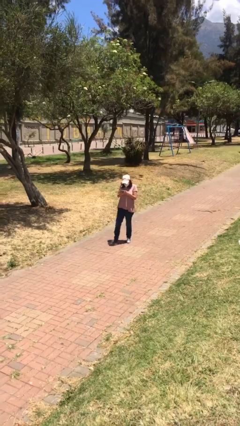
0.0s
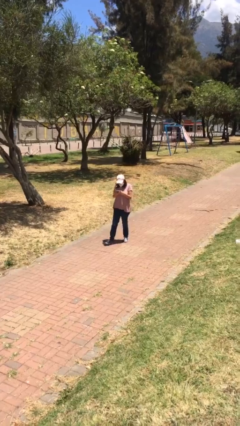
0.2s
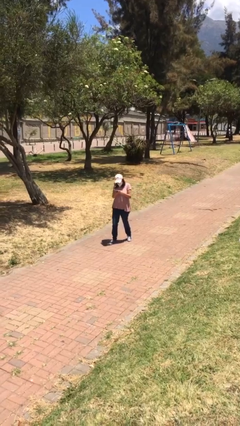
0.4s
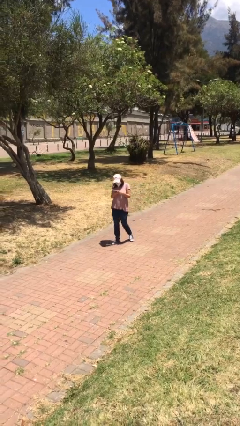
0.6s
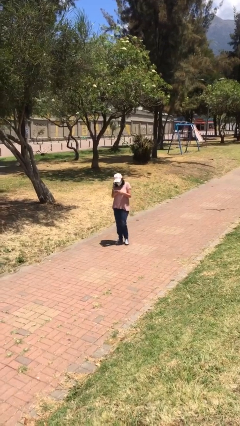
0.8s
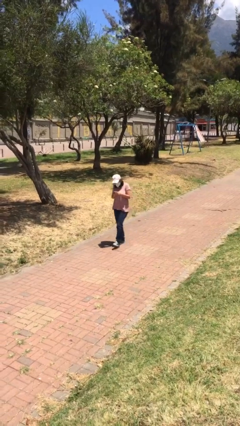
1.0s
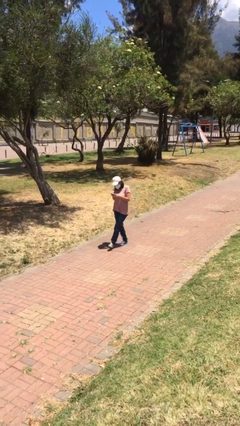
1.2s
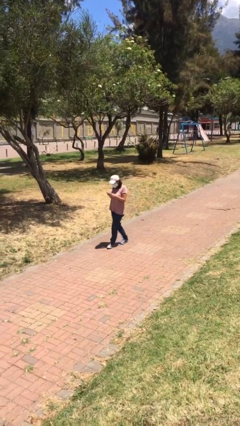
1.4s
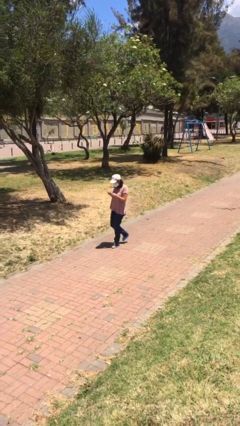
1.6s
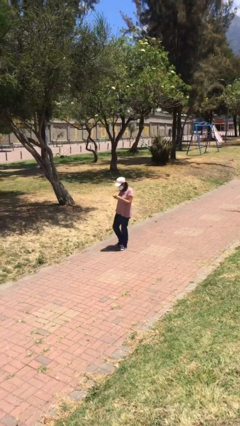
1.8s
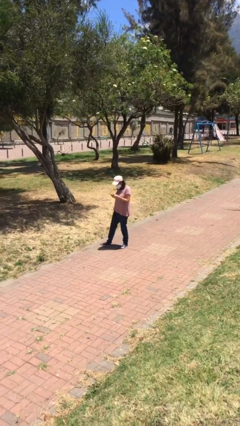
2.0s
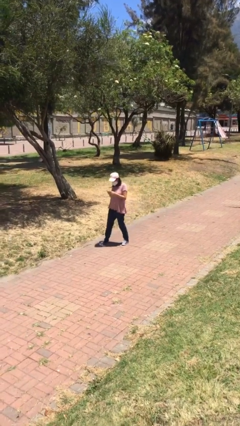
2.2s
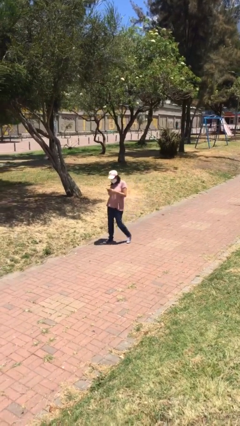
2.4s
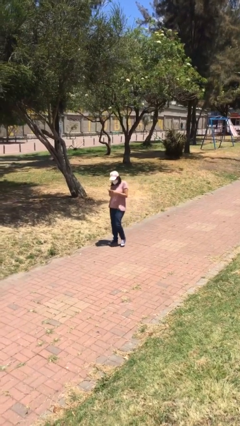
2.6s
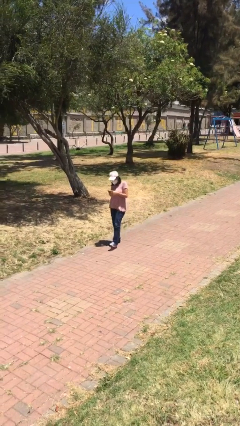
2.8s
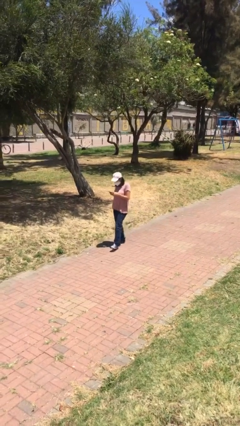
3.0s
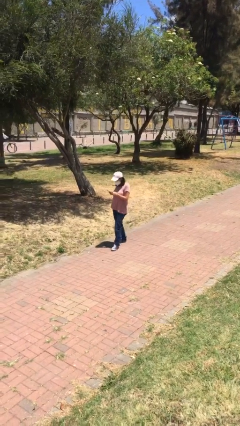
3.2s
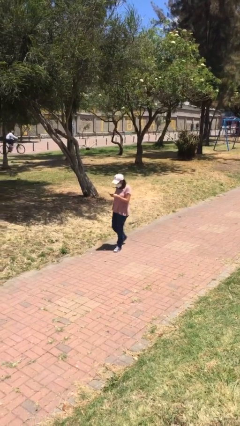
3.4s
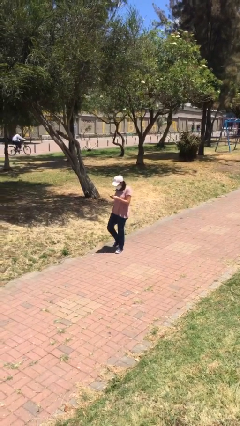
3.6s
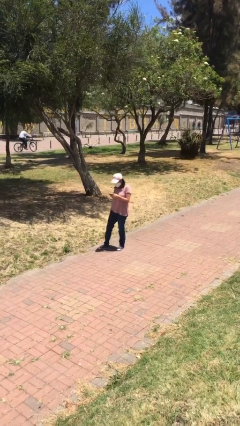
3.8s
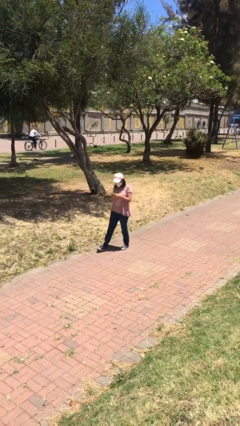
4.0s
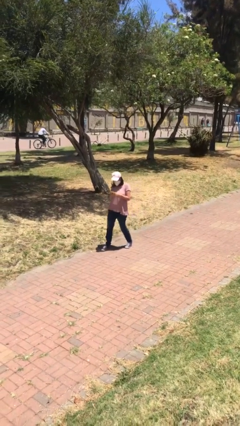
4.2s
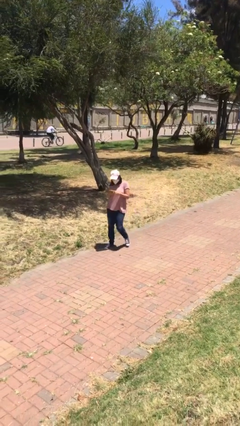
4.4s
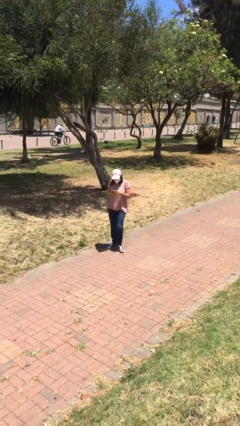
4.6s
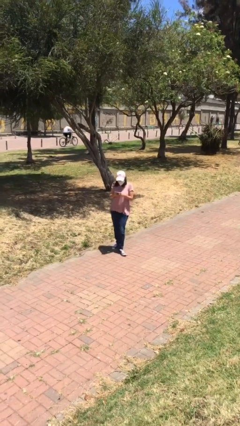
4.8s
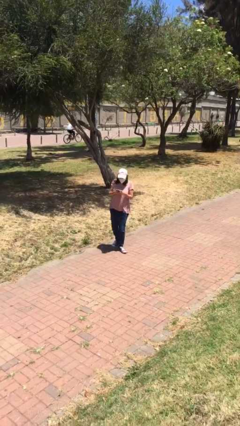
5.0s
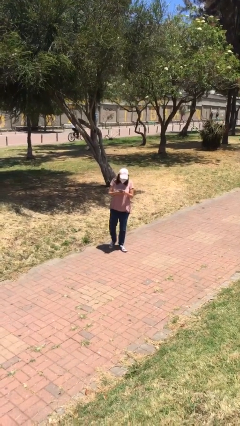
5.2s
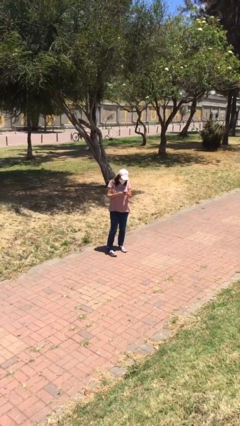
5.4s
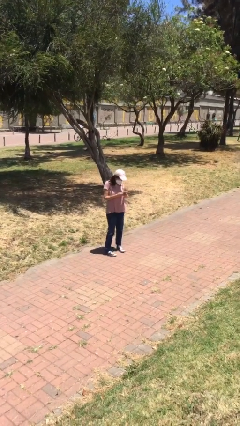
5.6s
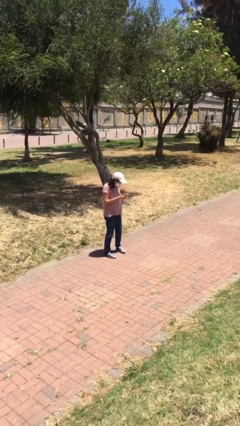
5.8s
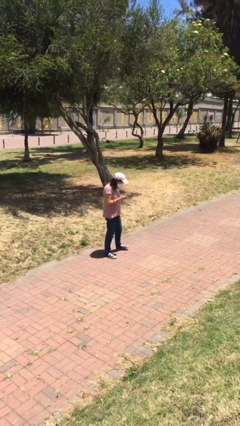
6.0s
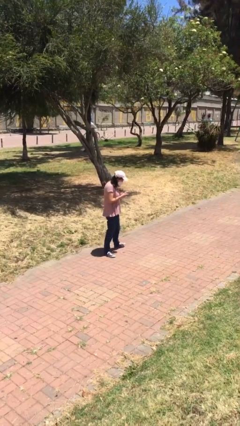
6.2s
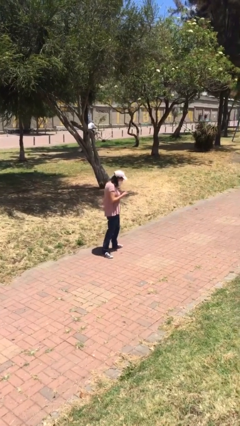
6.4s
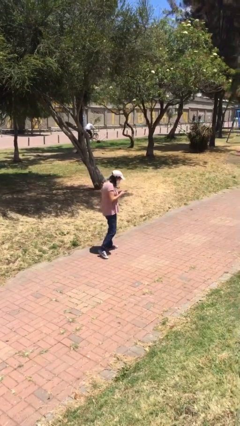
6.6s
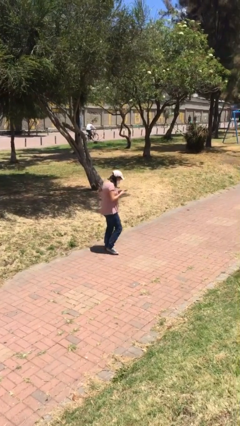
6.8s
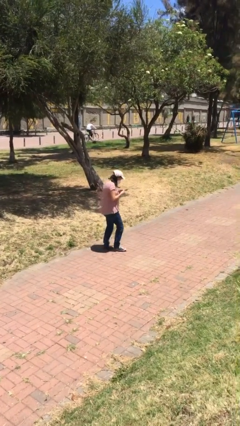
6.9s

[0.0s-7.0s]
person texts on phone

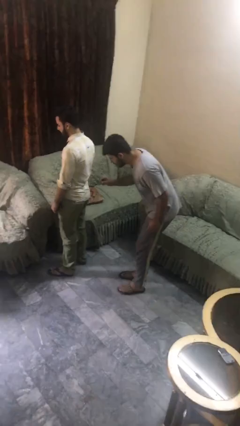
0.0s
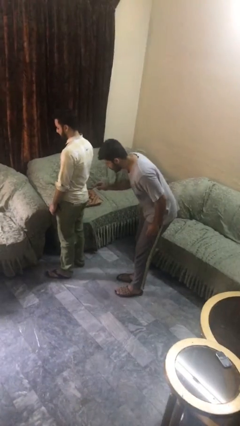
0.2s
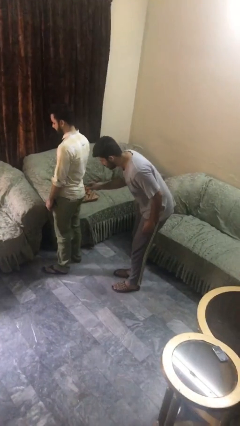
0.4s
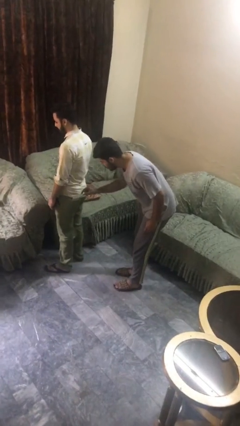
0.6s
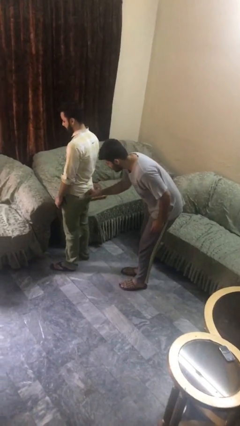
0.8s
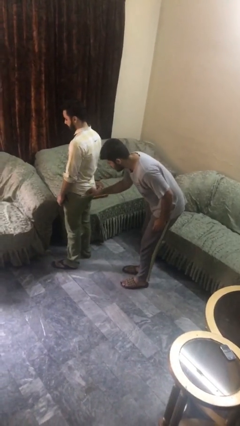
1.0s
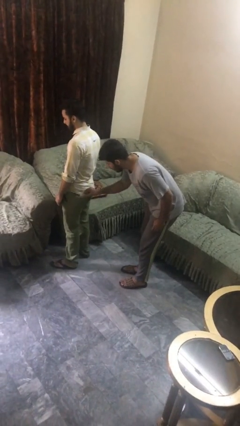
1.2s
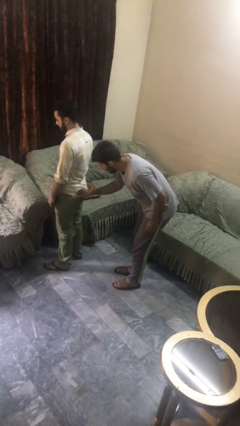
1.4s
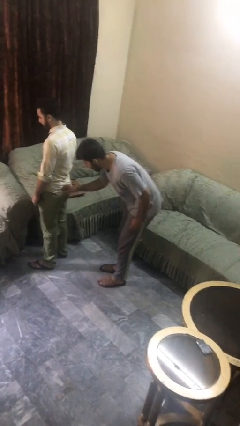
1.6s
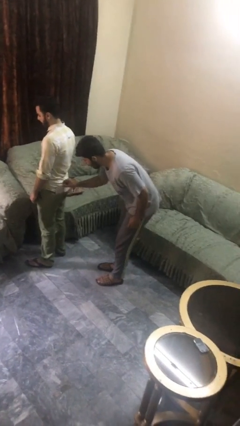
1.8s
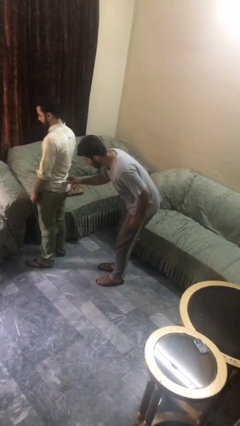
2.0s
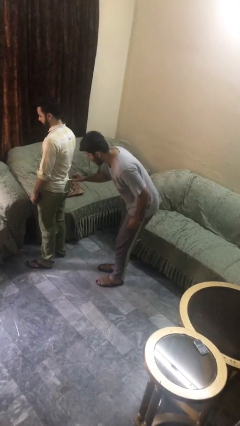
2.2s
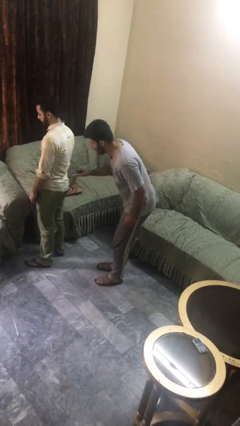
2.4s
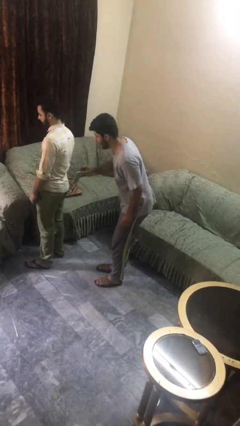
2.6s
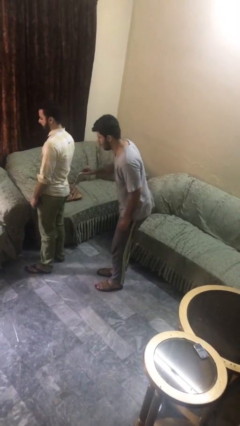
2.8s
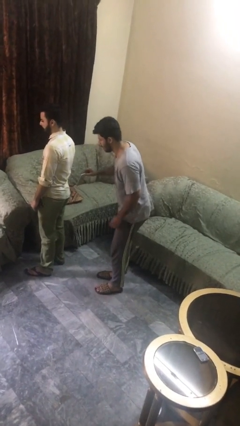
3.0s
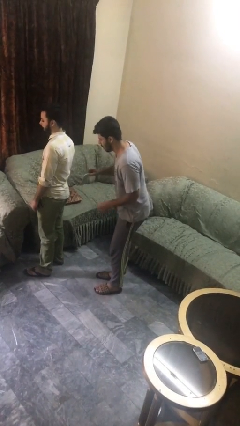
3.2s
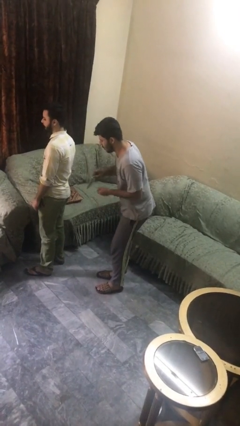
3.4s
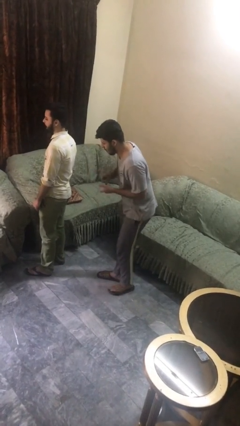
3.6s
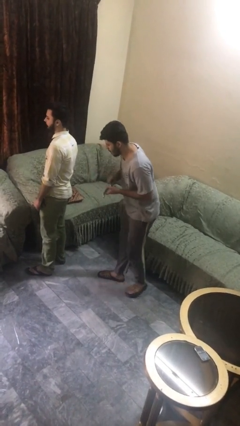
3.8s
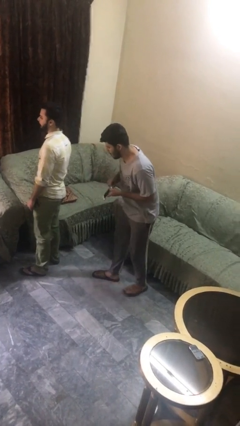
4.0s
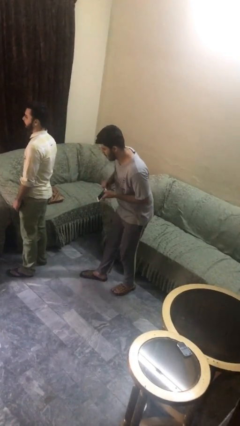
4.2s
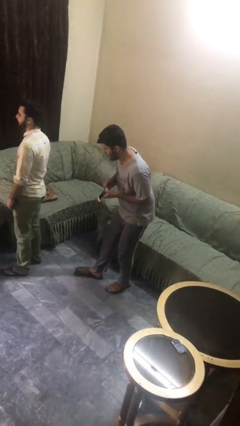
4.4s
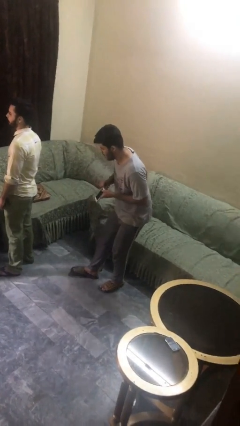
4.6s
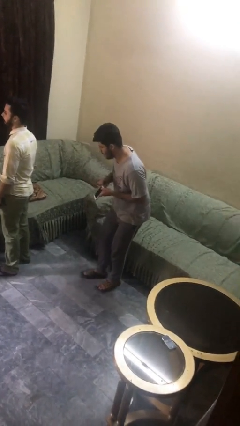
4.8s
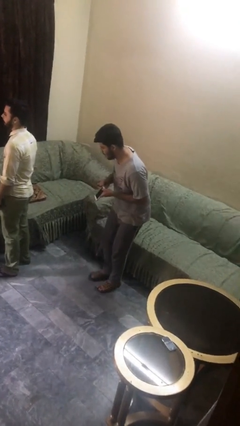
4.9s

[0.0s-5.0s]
person steals object from person

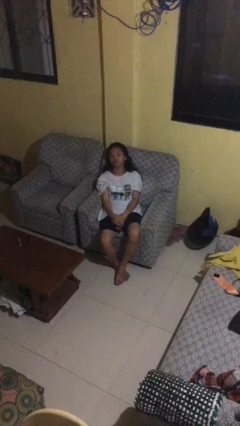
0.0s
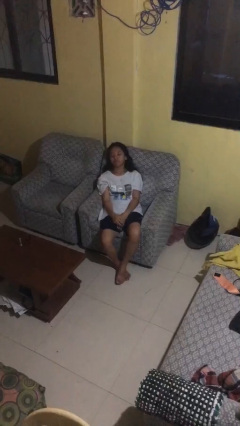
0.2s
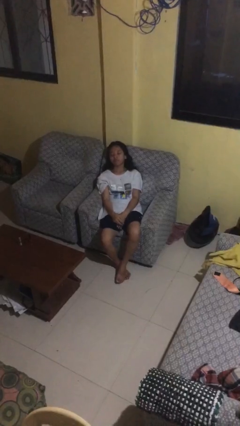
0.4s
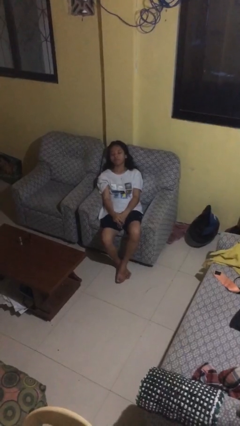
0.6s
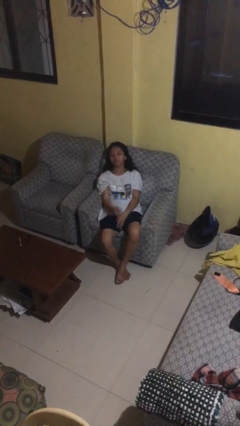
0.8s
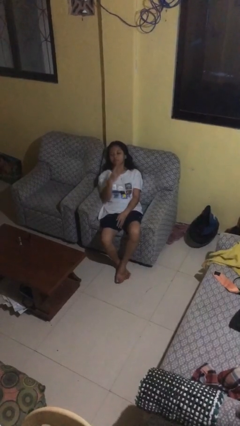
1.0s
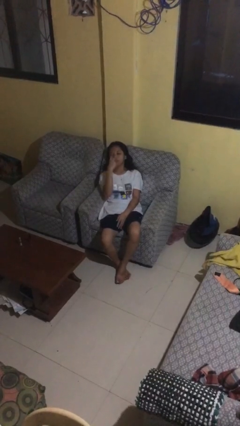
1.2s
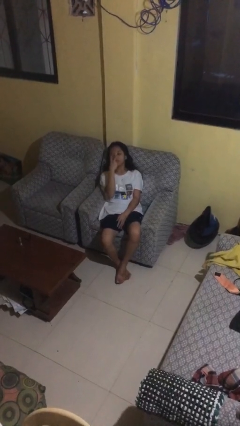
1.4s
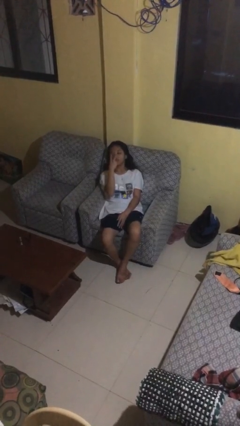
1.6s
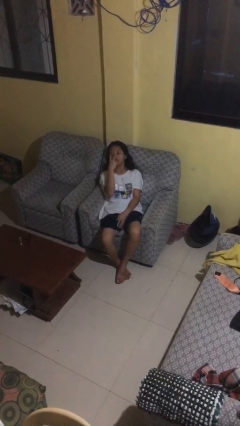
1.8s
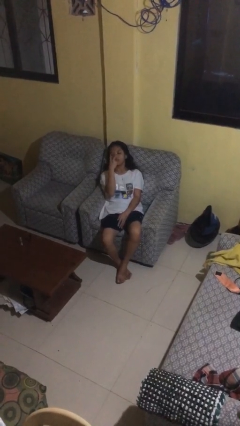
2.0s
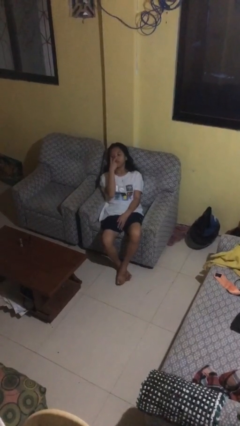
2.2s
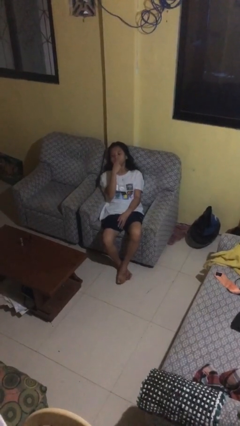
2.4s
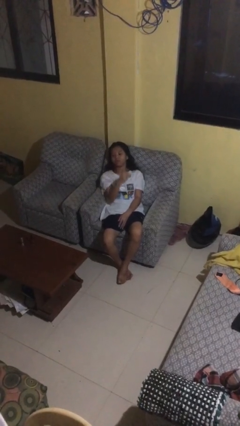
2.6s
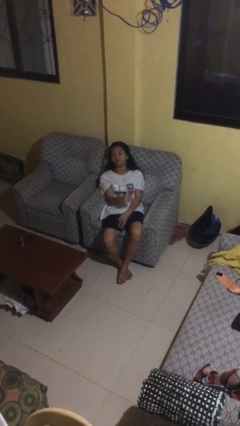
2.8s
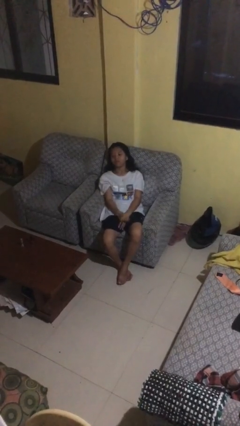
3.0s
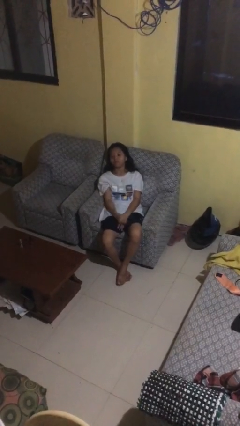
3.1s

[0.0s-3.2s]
person gestures watch closely

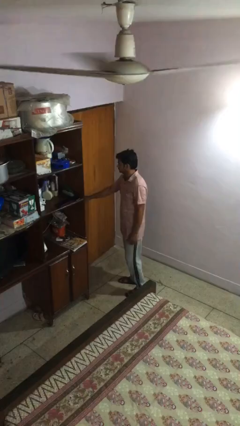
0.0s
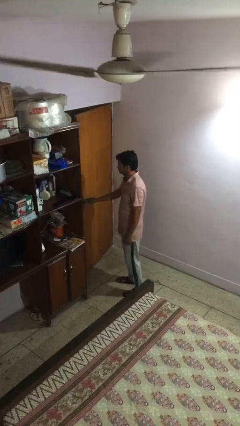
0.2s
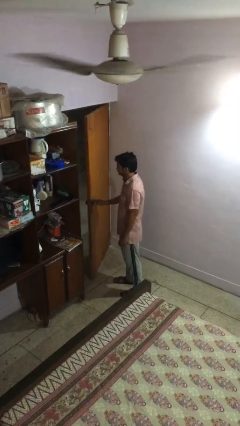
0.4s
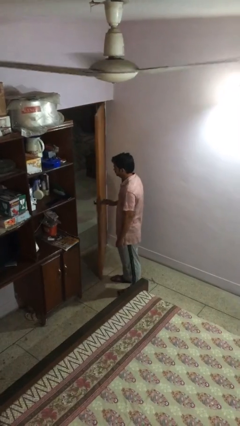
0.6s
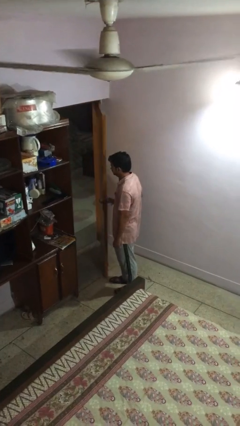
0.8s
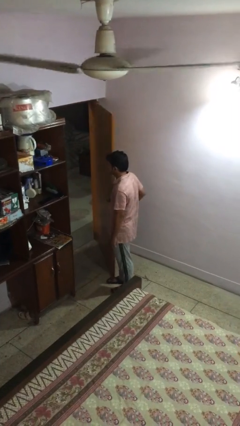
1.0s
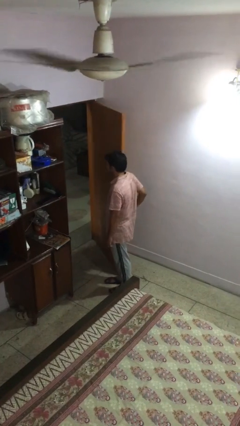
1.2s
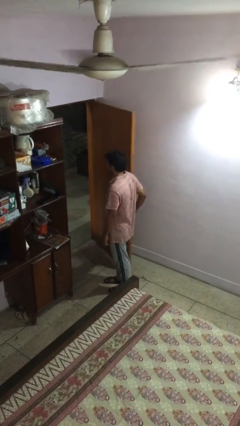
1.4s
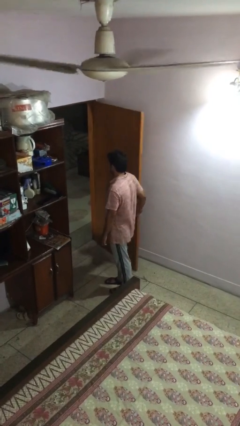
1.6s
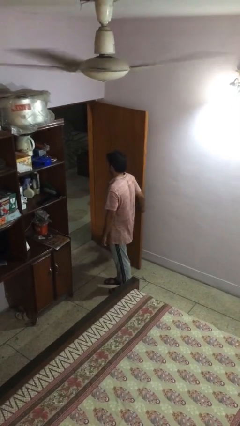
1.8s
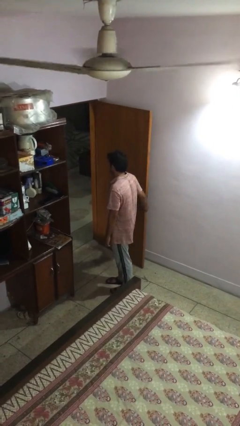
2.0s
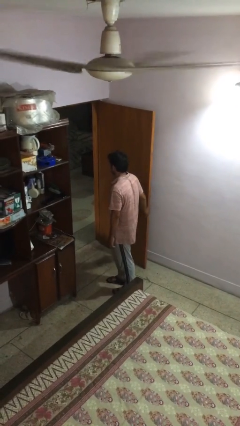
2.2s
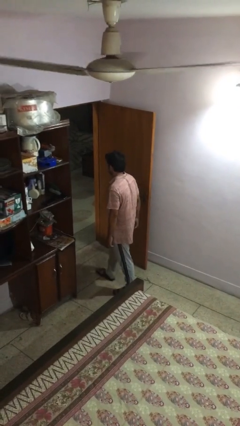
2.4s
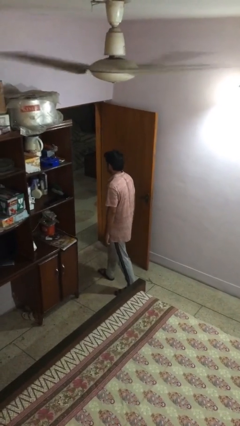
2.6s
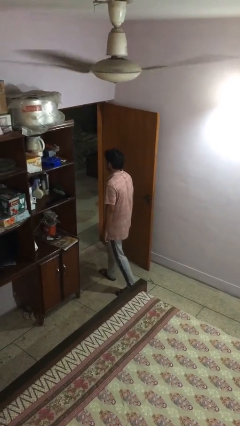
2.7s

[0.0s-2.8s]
person opens facility door
